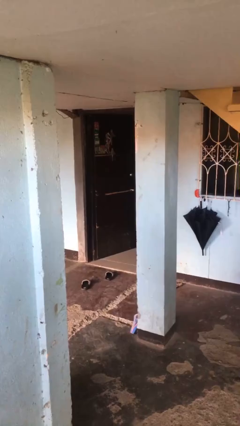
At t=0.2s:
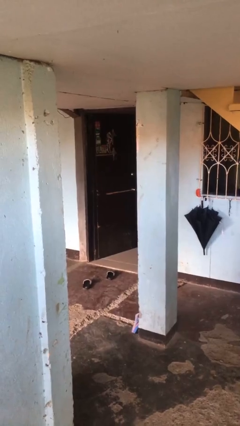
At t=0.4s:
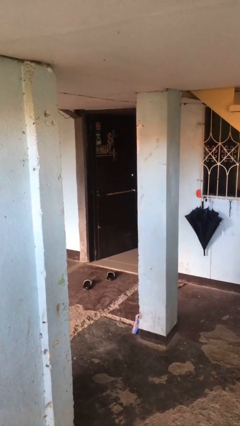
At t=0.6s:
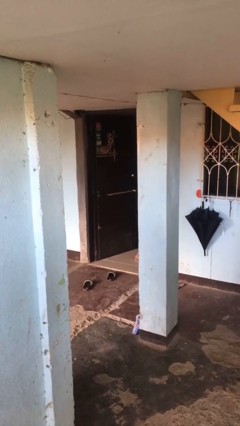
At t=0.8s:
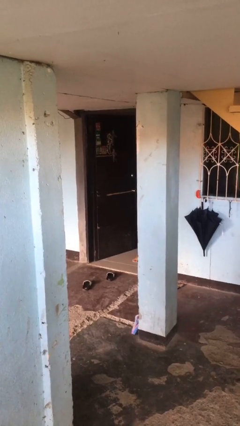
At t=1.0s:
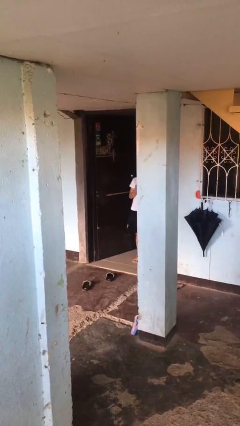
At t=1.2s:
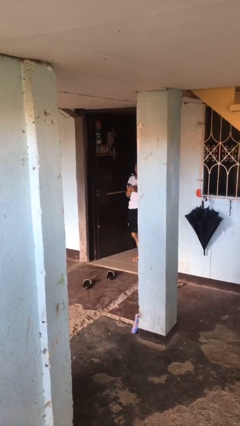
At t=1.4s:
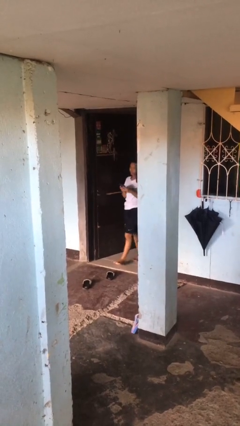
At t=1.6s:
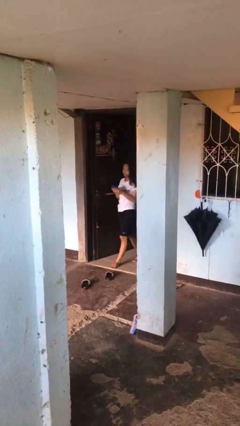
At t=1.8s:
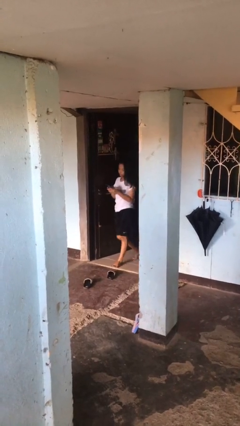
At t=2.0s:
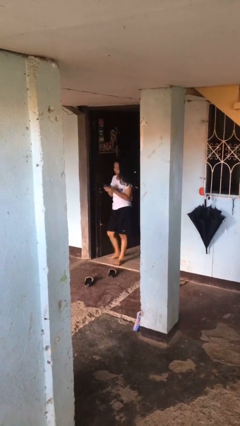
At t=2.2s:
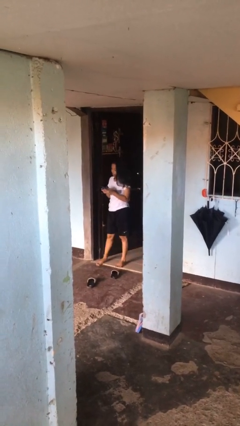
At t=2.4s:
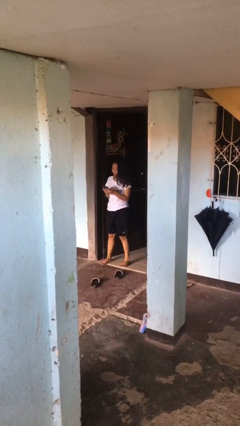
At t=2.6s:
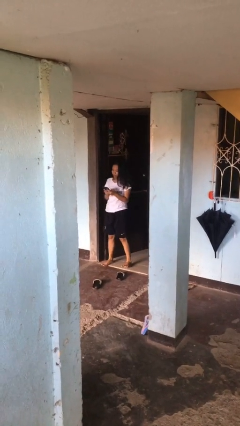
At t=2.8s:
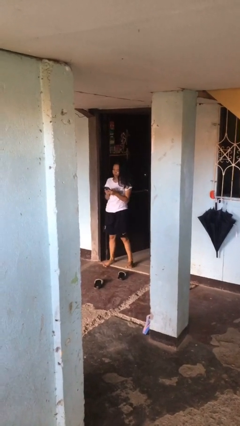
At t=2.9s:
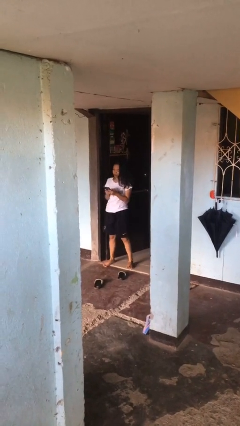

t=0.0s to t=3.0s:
person enters scene through structure

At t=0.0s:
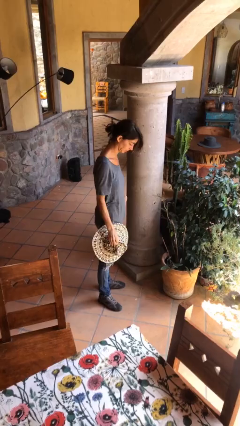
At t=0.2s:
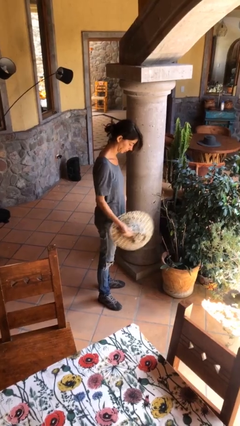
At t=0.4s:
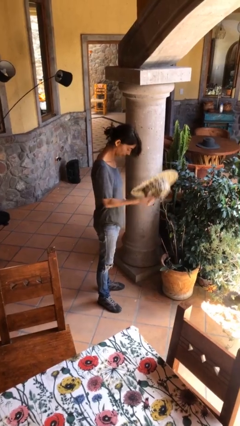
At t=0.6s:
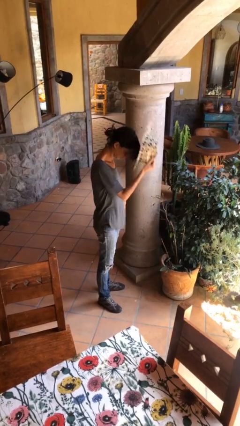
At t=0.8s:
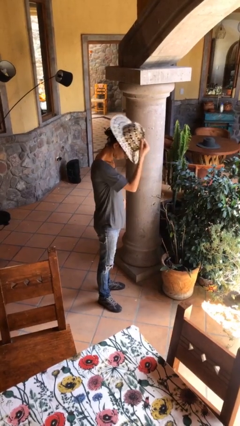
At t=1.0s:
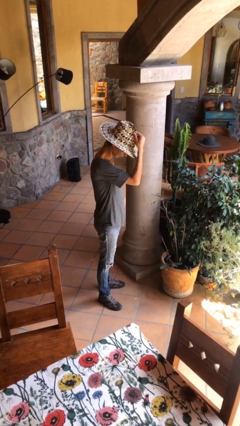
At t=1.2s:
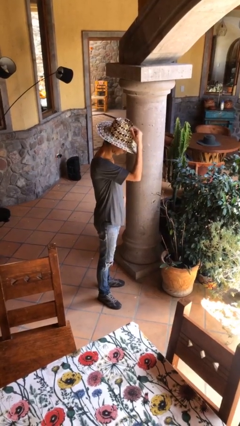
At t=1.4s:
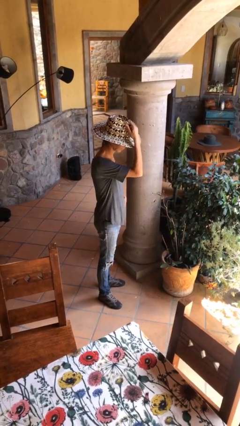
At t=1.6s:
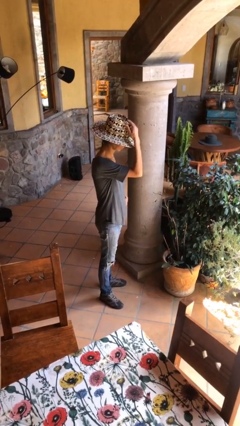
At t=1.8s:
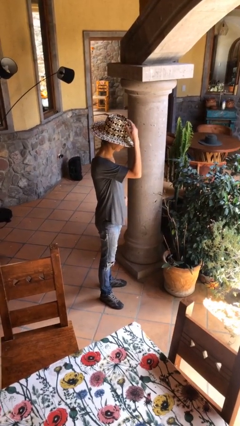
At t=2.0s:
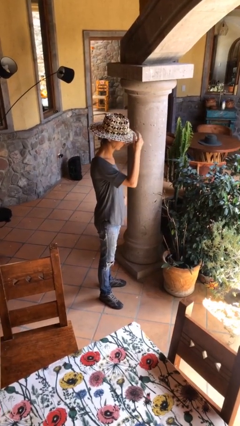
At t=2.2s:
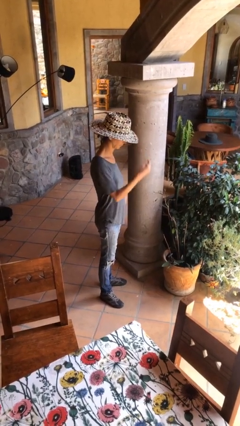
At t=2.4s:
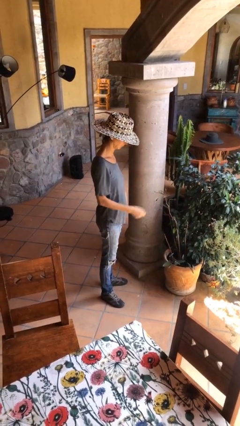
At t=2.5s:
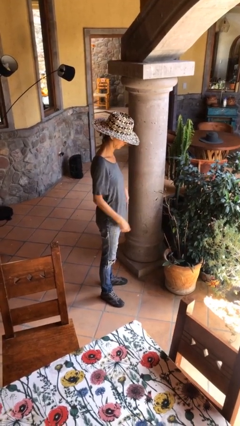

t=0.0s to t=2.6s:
person puts on hat

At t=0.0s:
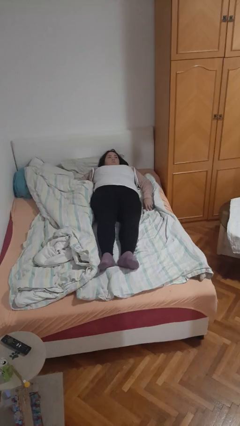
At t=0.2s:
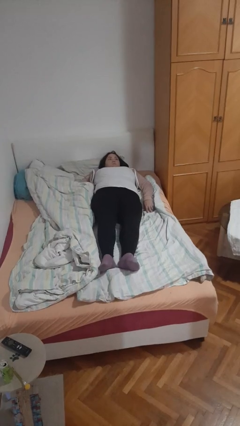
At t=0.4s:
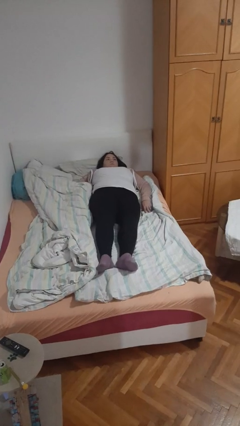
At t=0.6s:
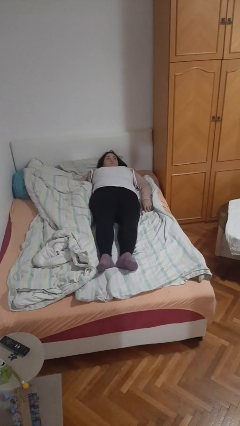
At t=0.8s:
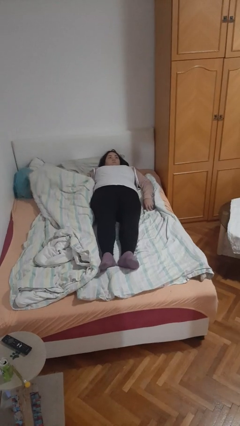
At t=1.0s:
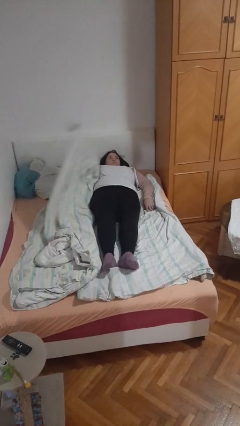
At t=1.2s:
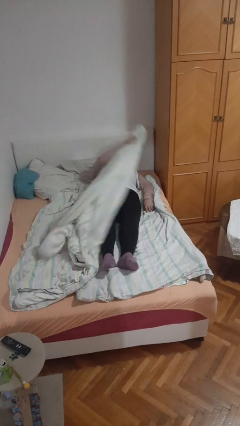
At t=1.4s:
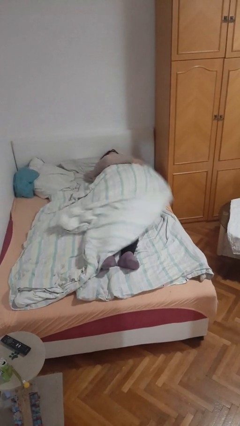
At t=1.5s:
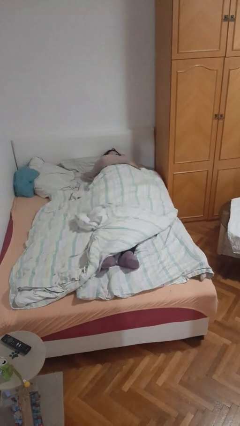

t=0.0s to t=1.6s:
person covers with bedsheets

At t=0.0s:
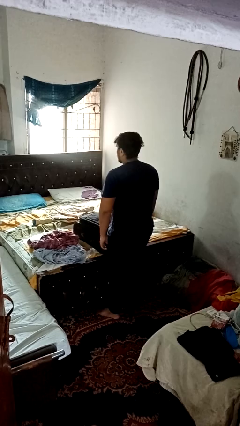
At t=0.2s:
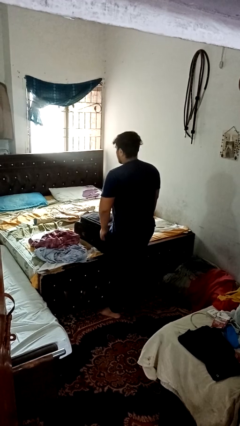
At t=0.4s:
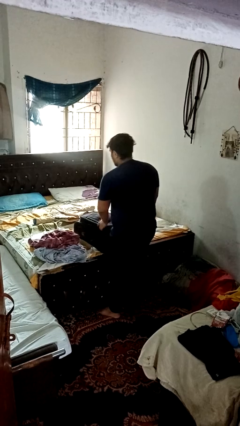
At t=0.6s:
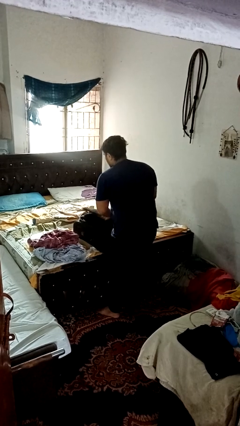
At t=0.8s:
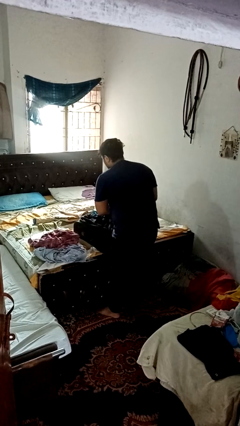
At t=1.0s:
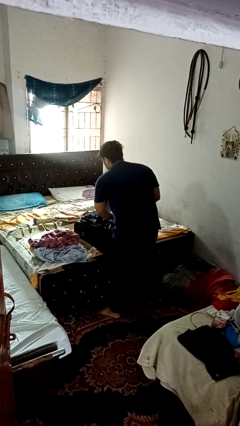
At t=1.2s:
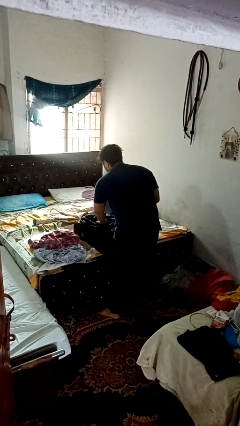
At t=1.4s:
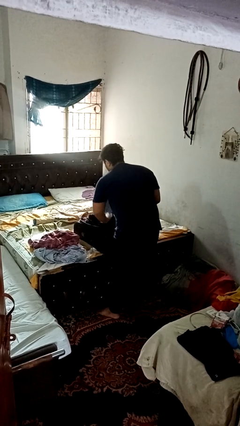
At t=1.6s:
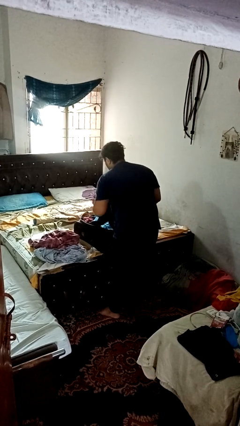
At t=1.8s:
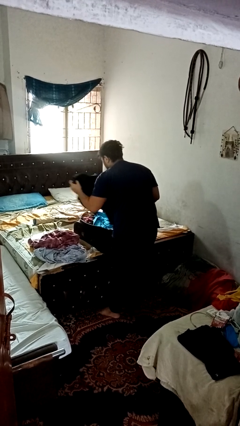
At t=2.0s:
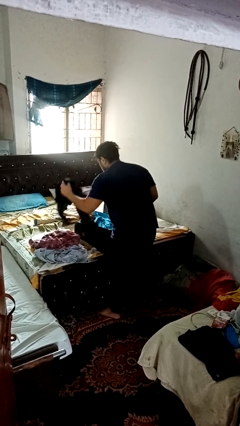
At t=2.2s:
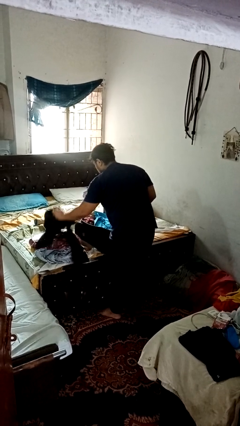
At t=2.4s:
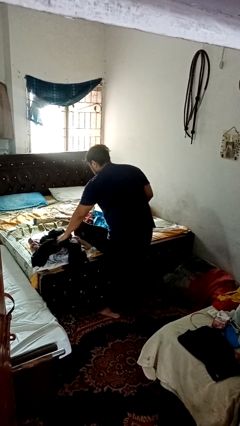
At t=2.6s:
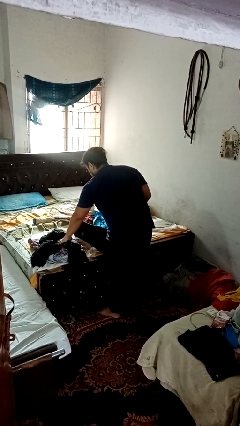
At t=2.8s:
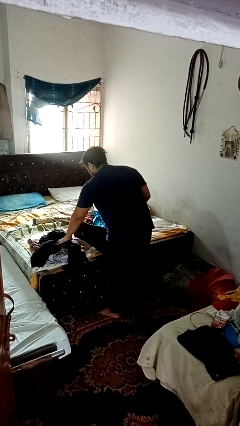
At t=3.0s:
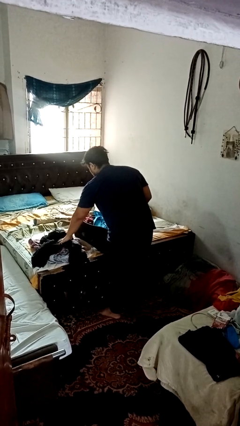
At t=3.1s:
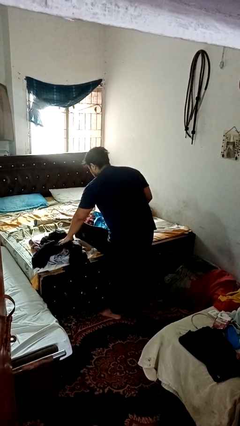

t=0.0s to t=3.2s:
person unloads clothes from suitcase

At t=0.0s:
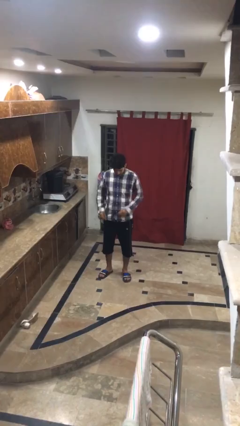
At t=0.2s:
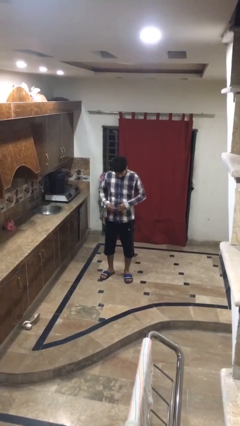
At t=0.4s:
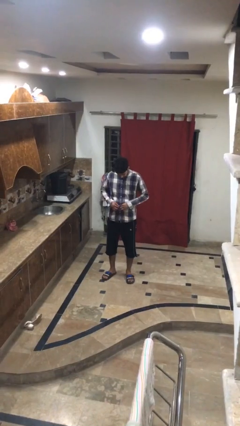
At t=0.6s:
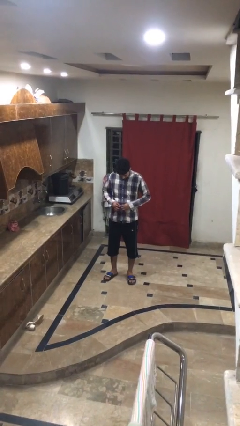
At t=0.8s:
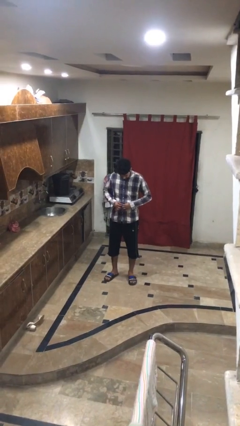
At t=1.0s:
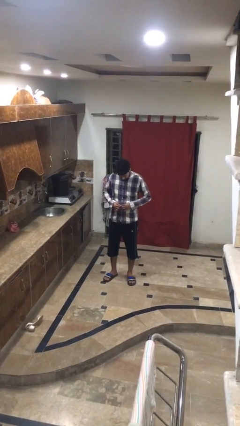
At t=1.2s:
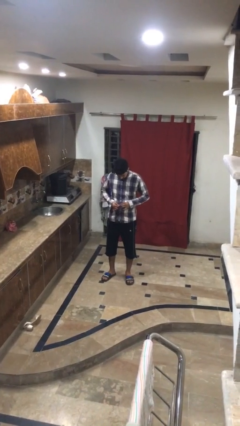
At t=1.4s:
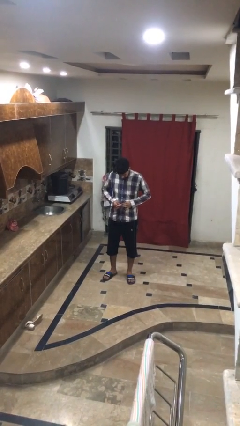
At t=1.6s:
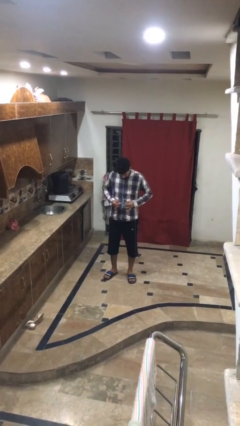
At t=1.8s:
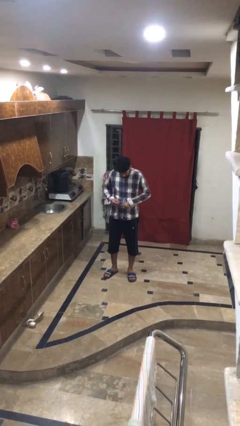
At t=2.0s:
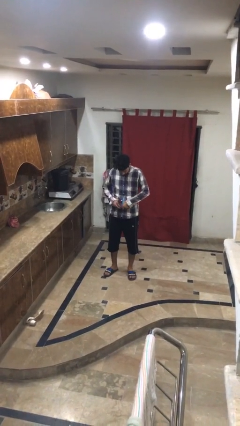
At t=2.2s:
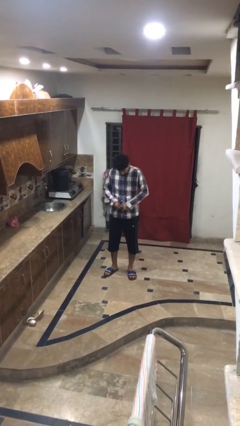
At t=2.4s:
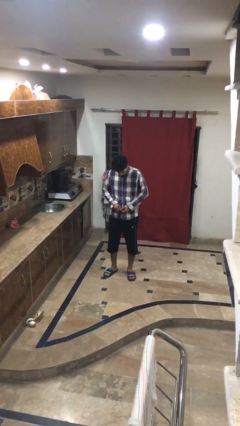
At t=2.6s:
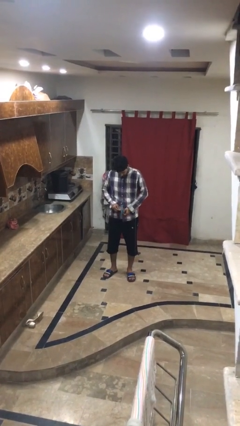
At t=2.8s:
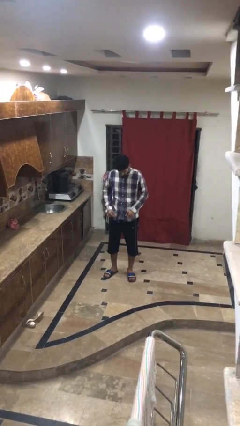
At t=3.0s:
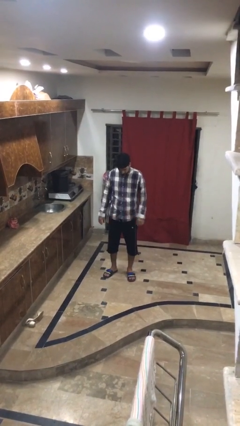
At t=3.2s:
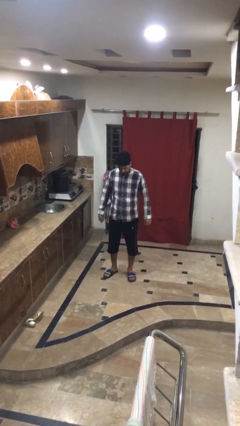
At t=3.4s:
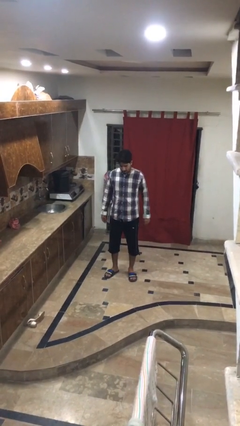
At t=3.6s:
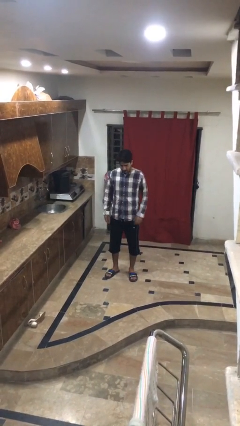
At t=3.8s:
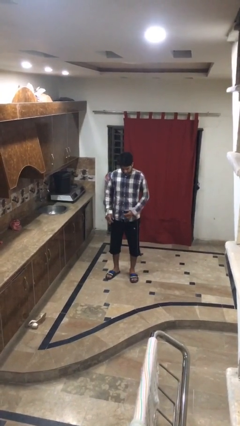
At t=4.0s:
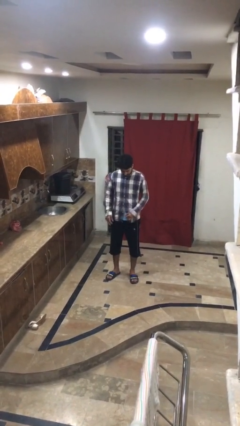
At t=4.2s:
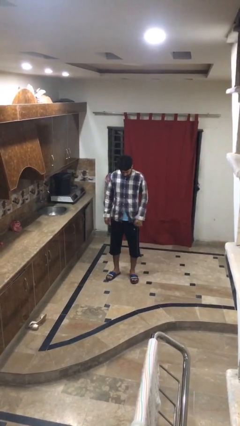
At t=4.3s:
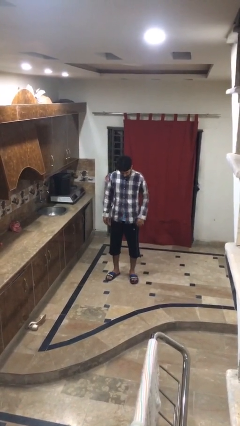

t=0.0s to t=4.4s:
person unbuttons shirt

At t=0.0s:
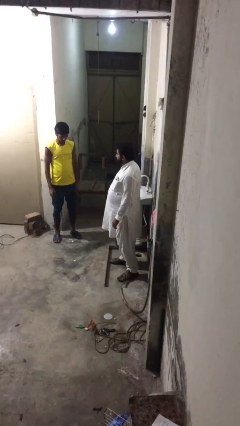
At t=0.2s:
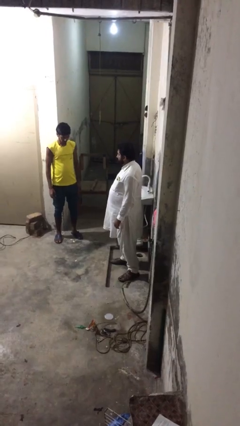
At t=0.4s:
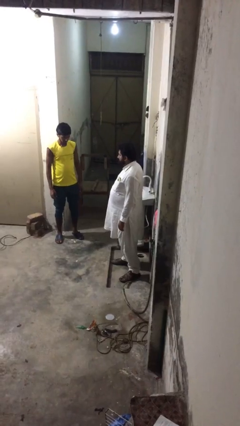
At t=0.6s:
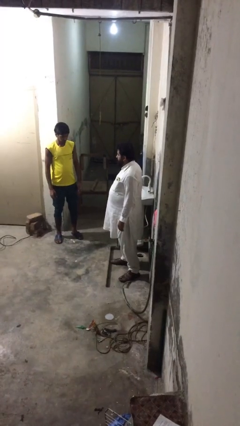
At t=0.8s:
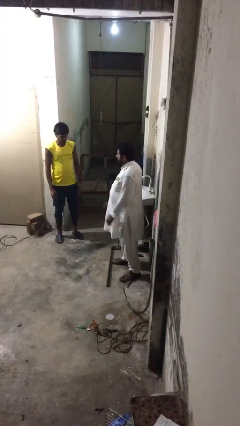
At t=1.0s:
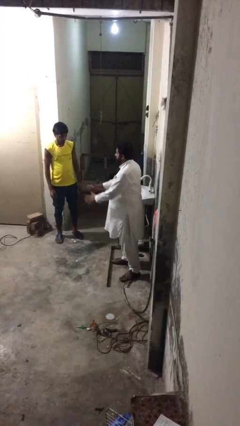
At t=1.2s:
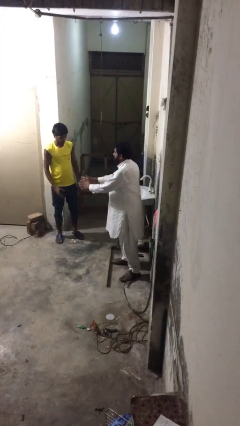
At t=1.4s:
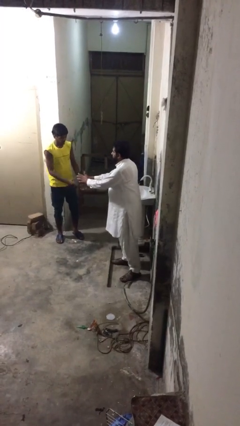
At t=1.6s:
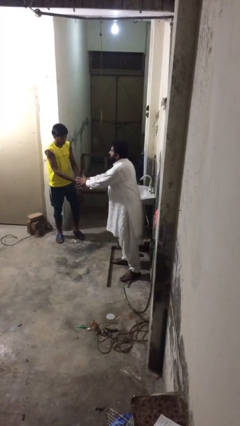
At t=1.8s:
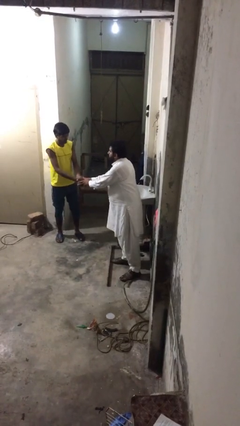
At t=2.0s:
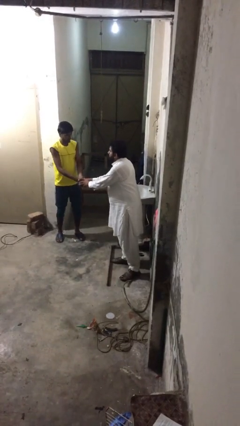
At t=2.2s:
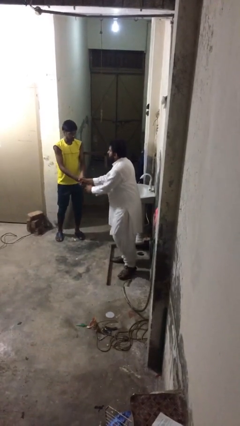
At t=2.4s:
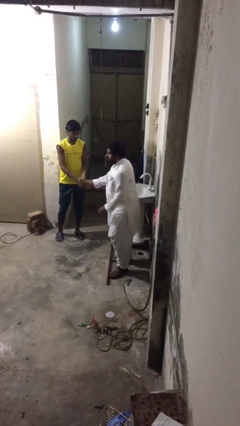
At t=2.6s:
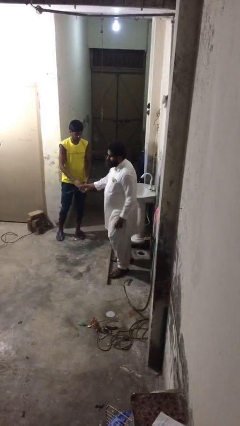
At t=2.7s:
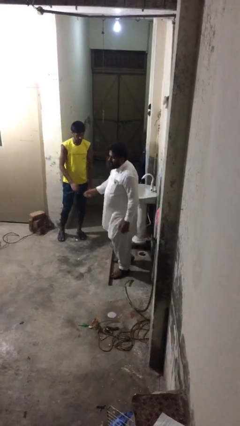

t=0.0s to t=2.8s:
person shakes hand
